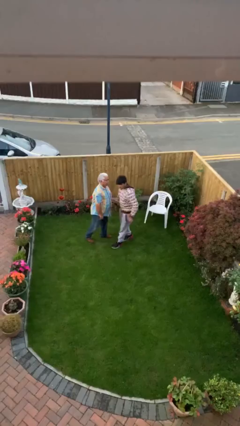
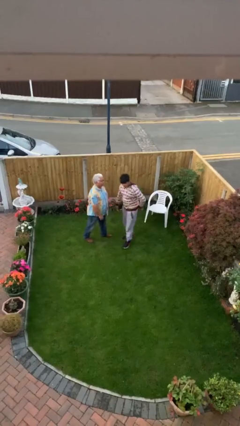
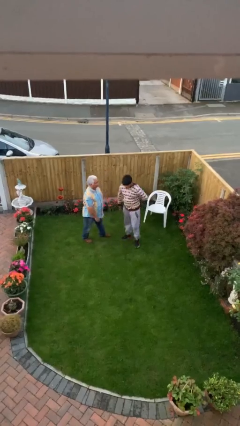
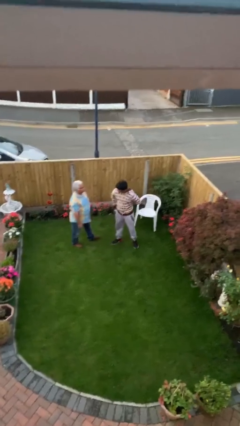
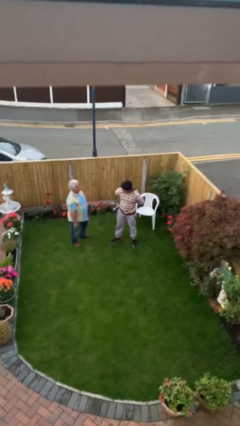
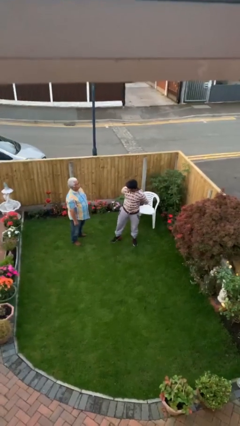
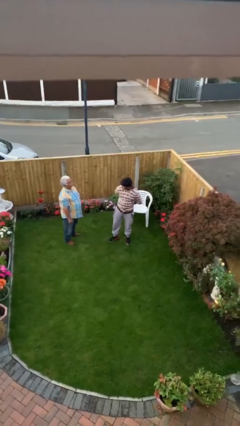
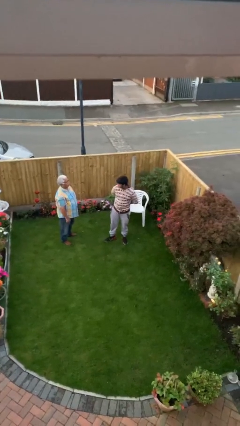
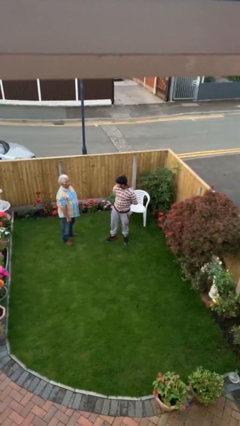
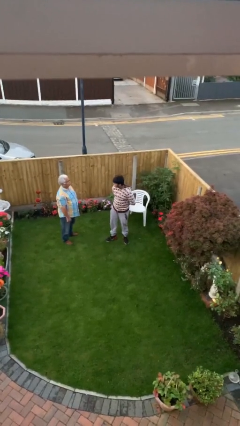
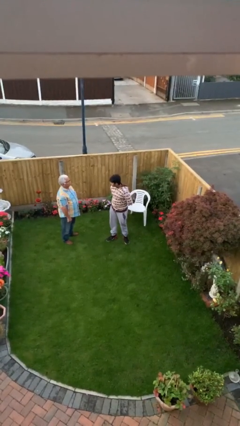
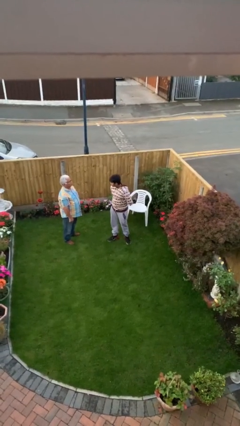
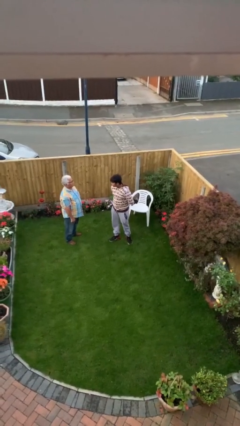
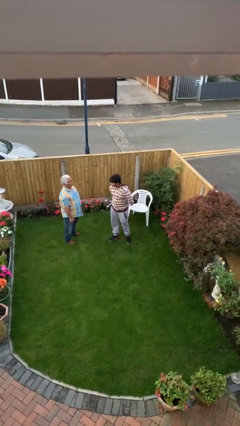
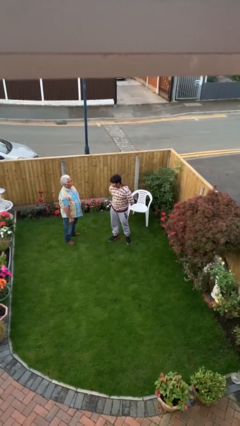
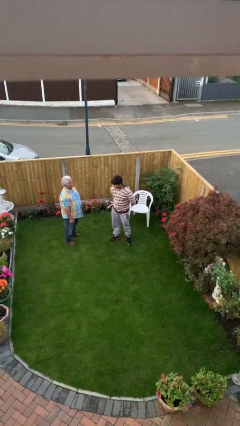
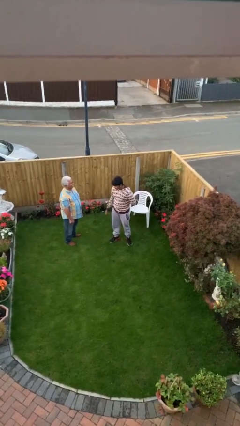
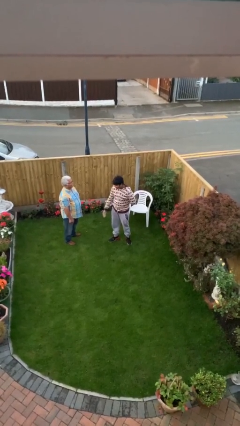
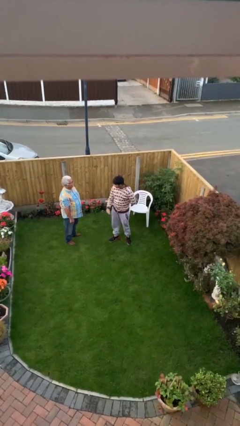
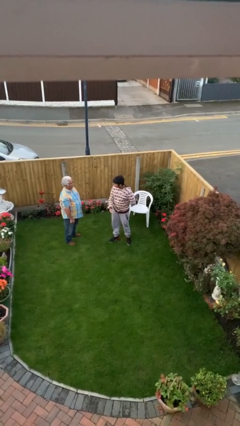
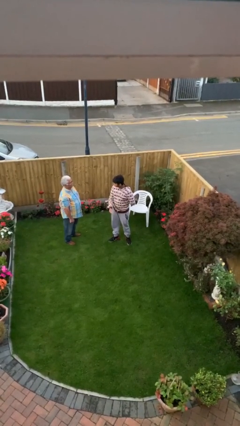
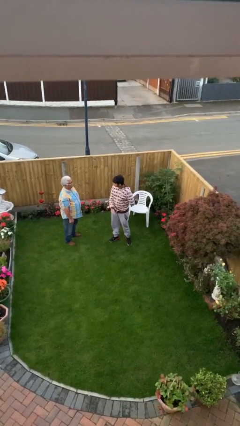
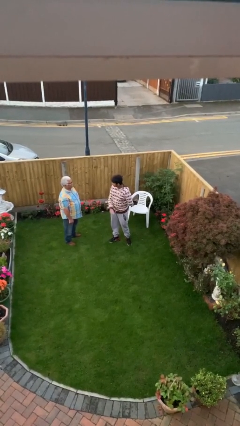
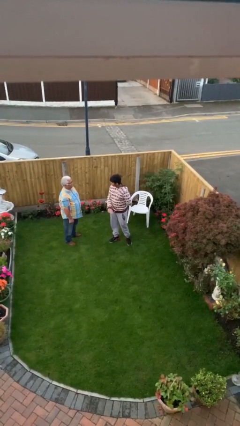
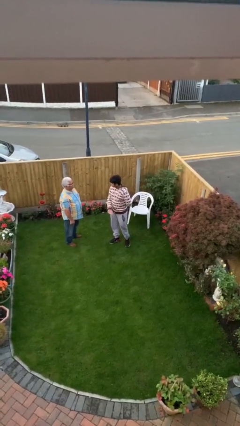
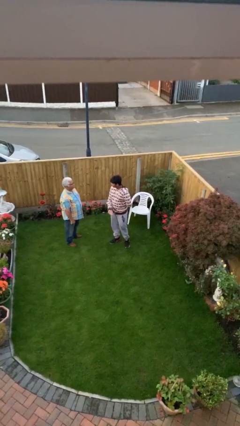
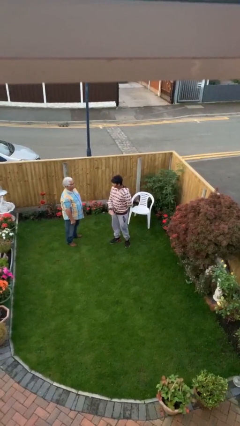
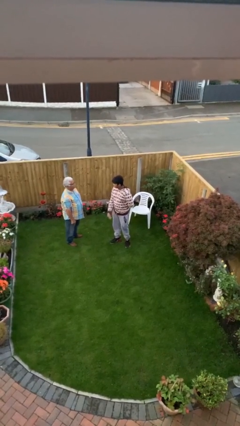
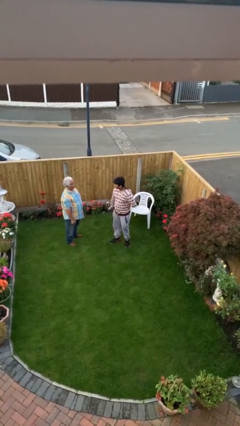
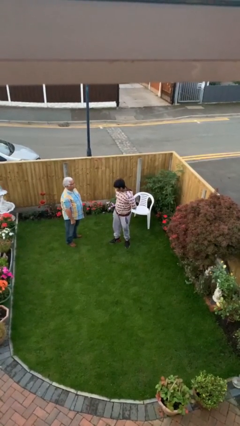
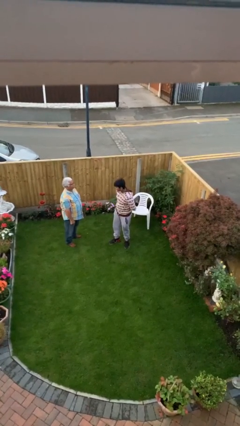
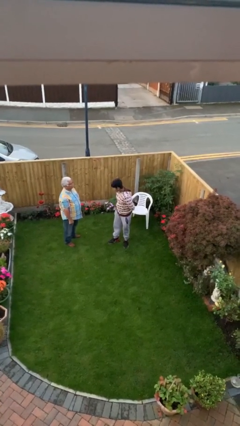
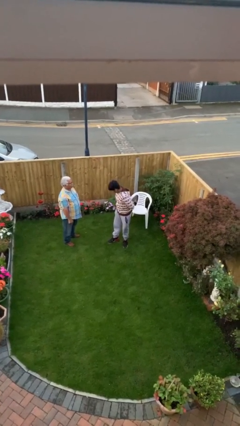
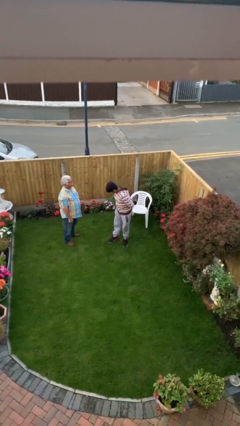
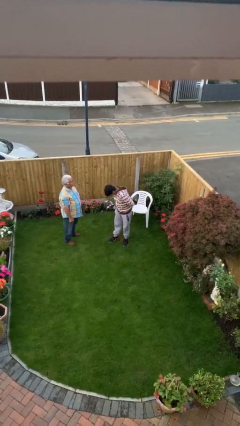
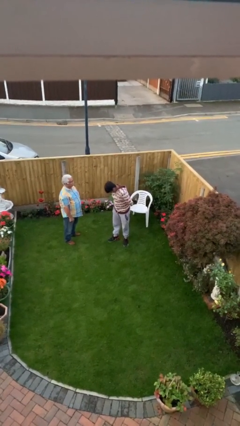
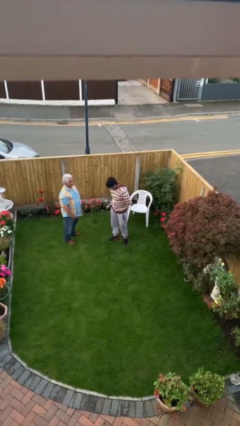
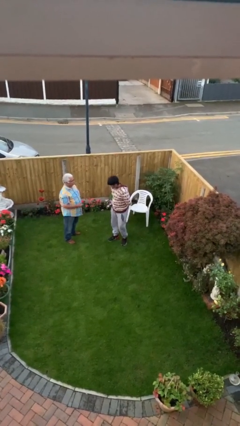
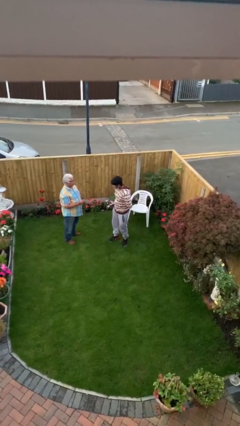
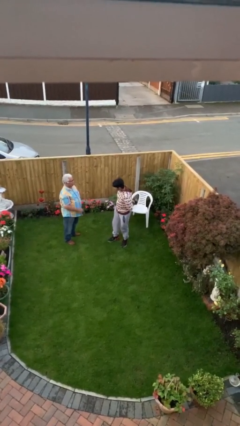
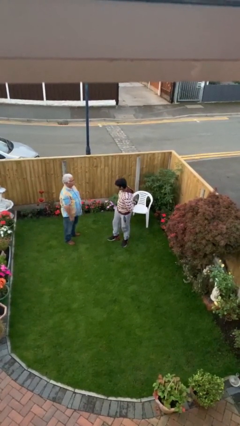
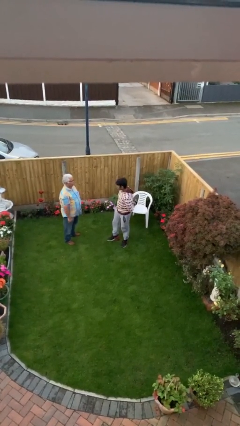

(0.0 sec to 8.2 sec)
person talks to person

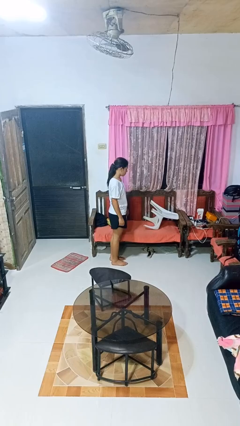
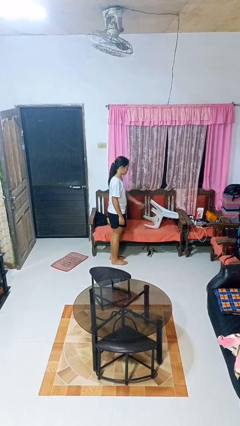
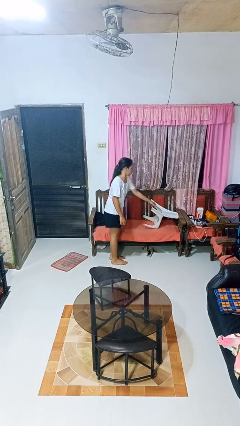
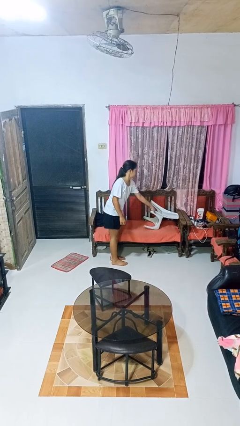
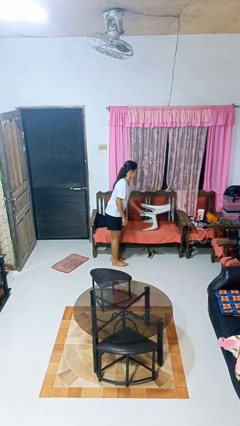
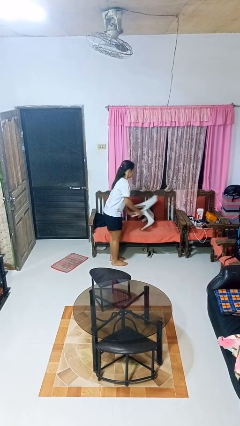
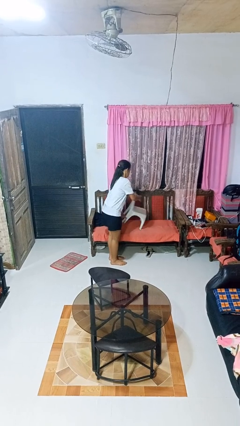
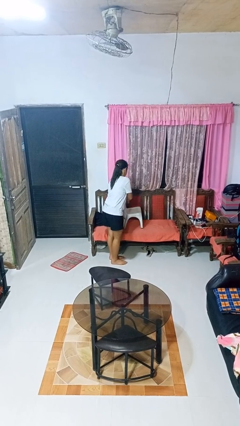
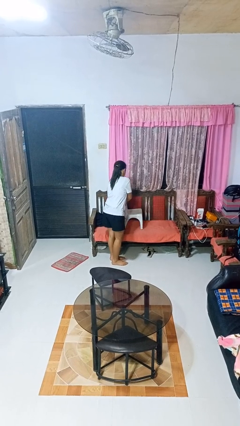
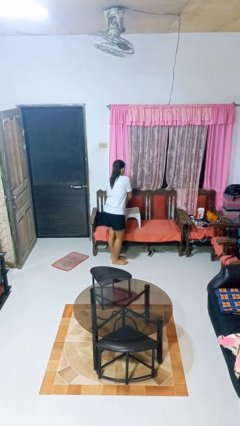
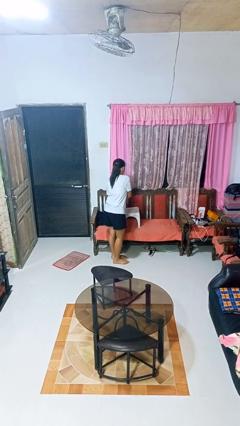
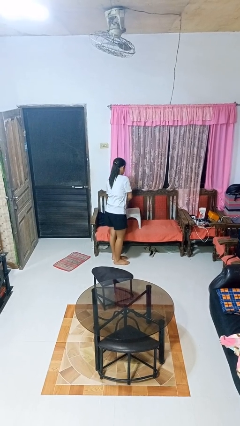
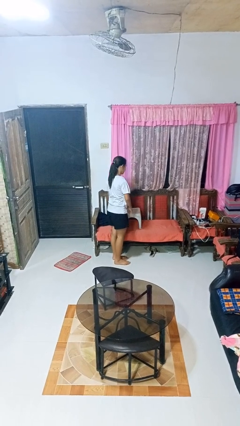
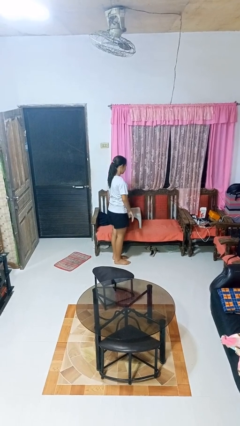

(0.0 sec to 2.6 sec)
person sets upright furniture

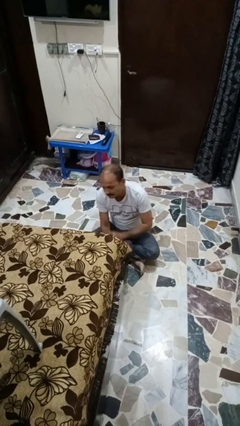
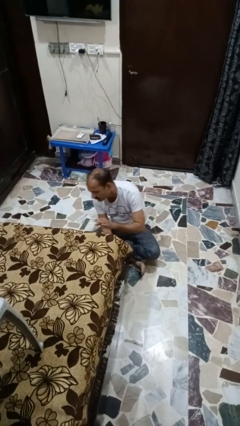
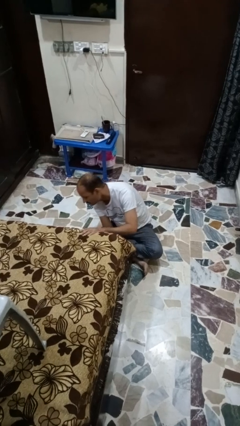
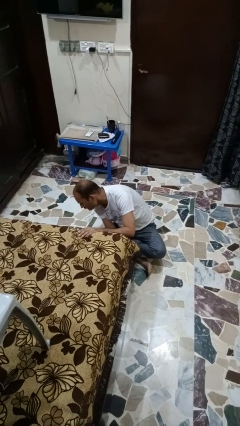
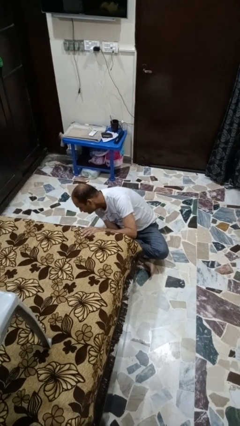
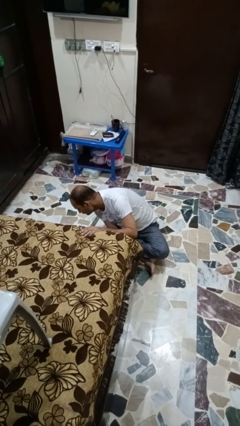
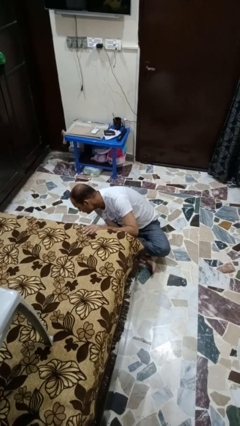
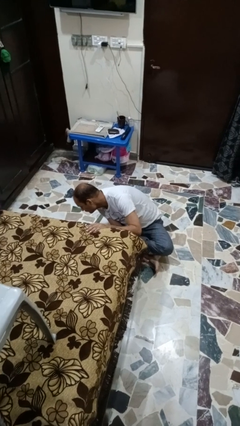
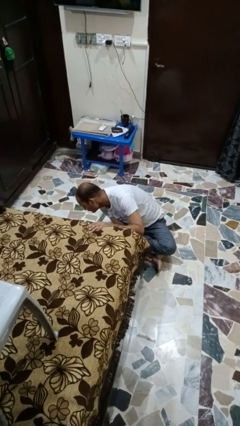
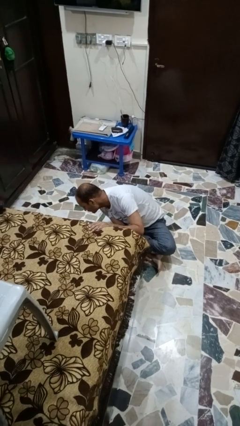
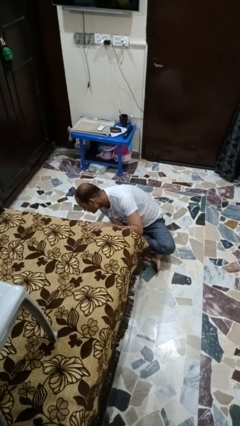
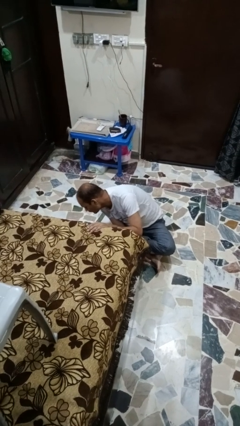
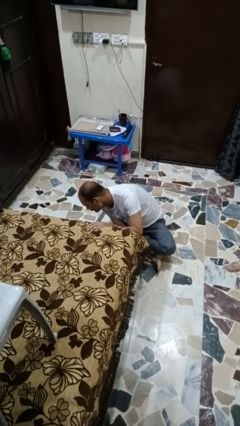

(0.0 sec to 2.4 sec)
person searches under bed

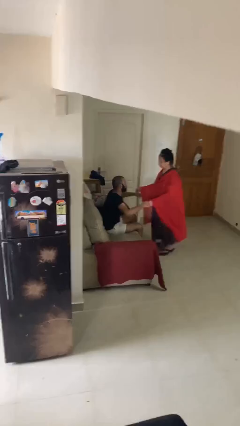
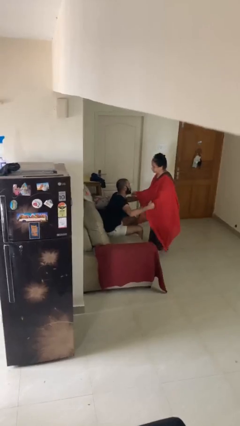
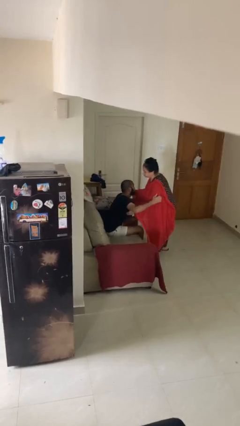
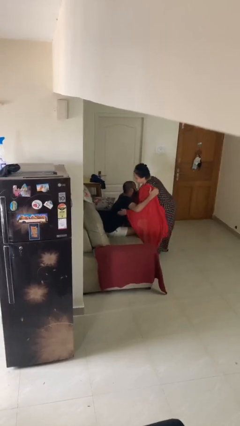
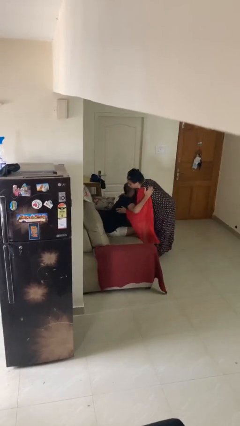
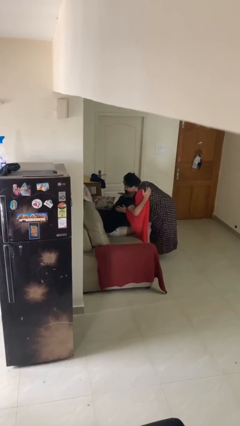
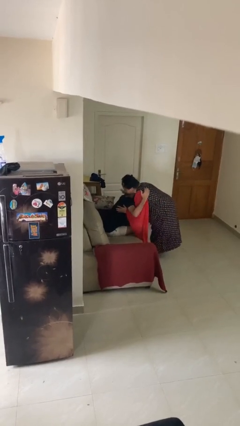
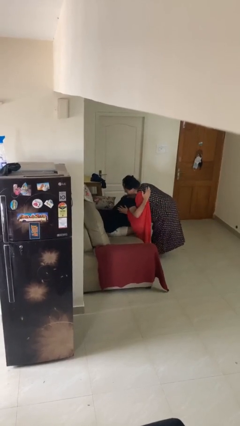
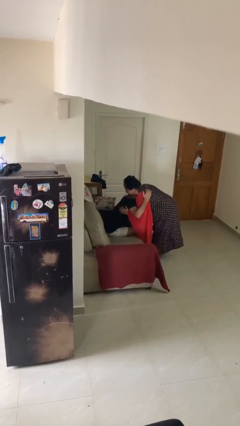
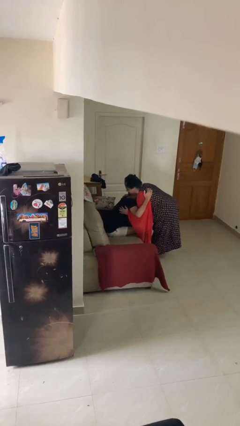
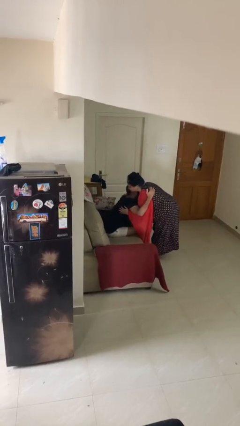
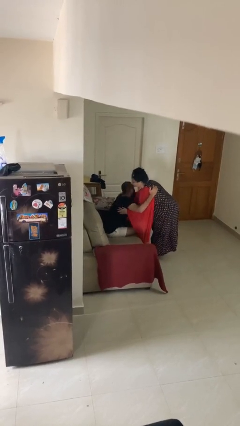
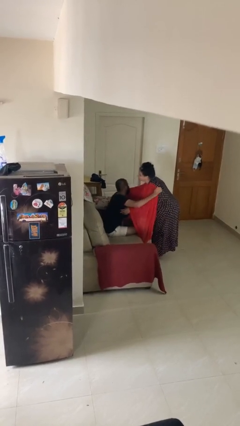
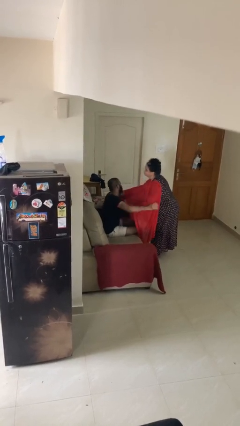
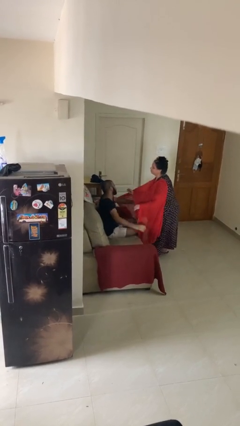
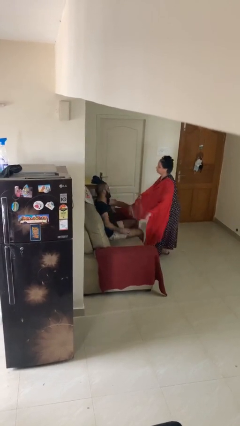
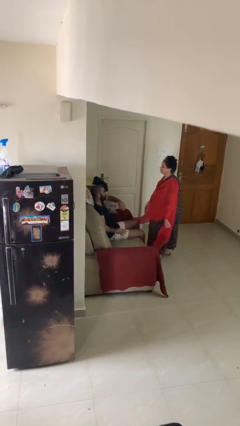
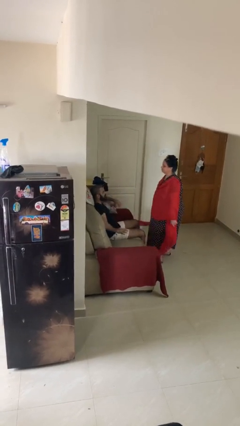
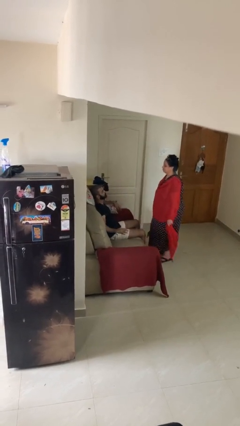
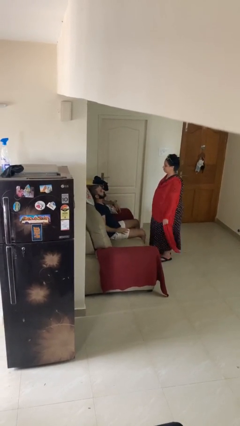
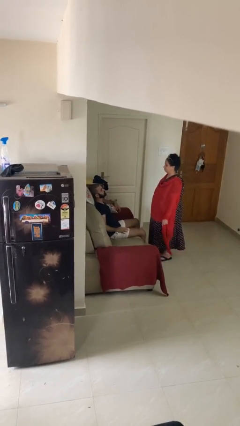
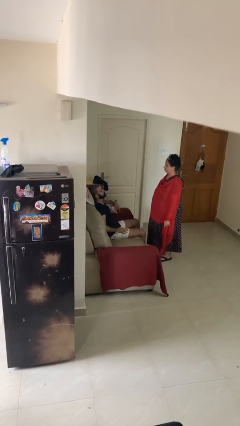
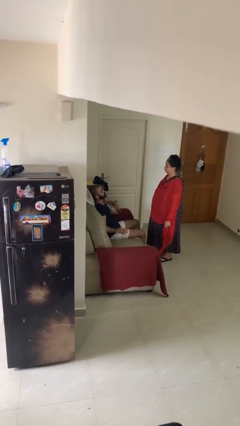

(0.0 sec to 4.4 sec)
person embraces person
